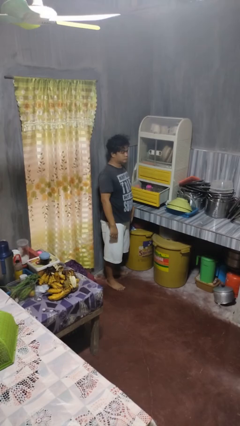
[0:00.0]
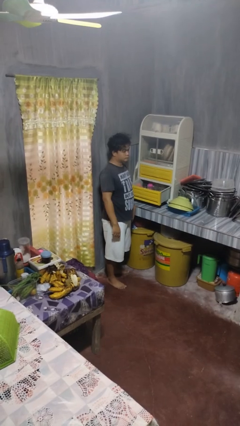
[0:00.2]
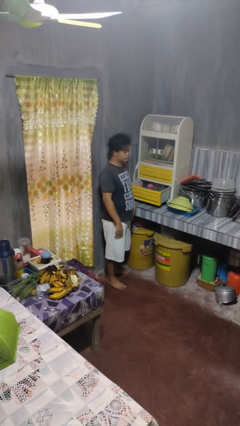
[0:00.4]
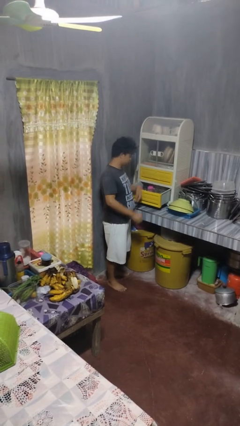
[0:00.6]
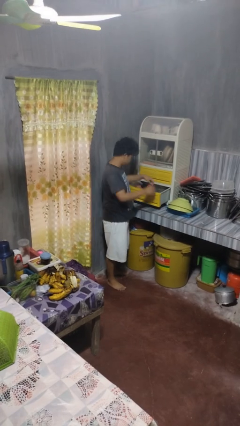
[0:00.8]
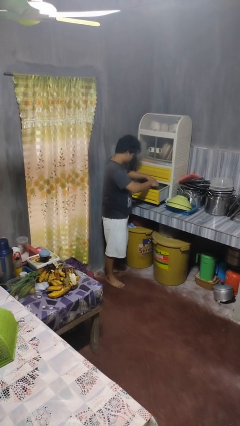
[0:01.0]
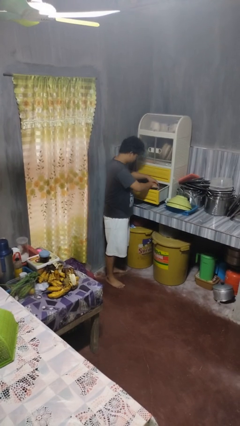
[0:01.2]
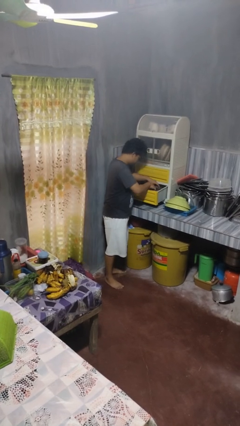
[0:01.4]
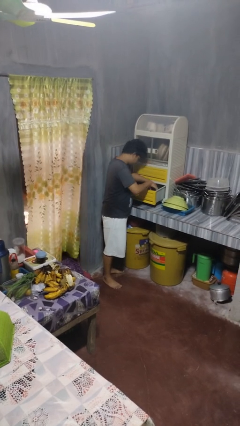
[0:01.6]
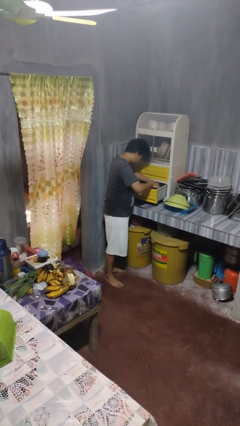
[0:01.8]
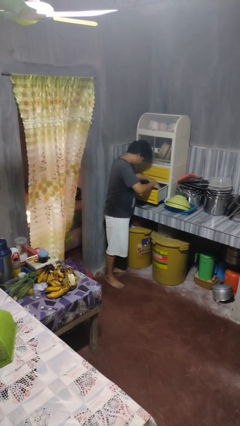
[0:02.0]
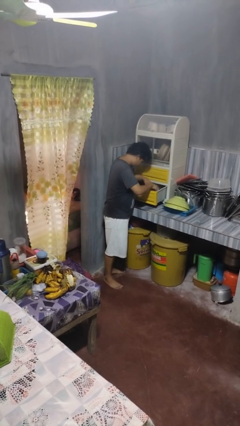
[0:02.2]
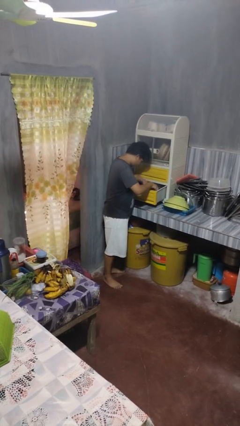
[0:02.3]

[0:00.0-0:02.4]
person searches in kitchen drawer

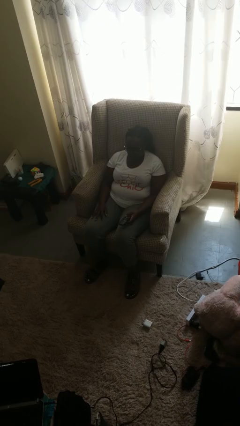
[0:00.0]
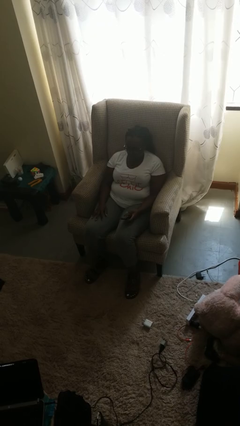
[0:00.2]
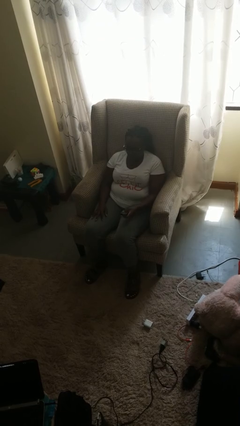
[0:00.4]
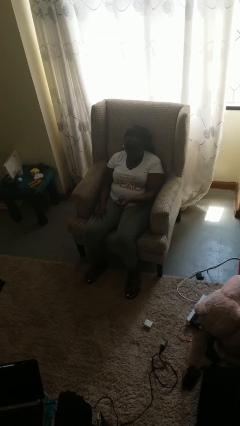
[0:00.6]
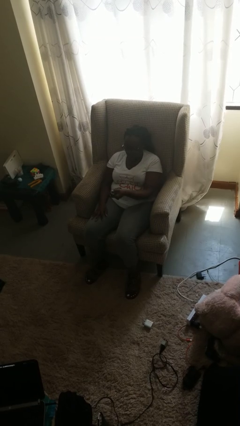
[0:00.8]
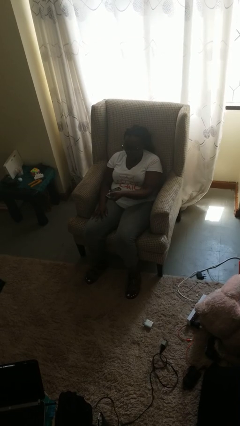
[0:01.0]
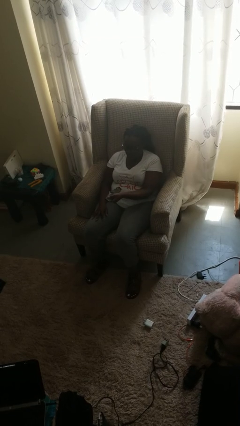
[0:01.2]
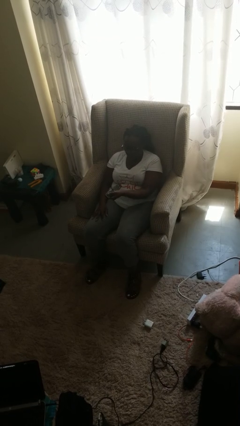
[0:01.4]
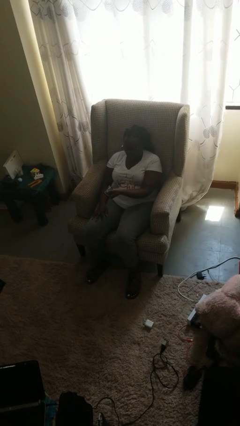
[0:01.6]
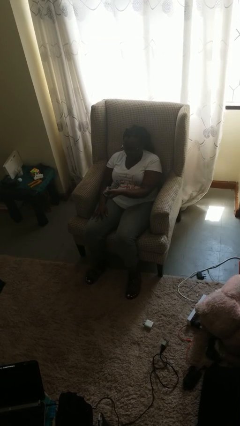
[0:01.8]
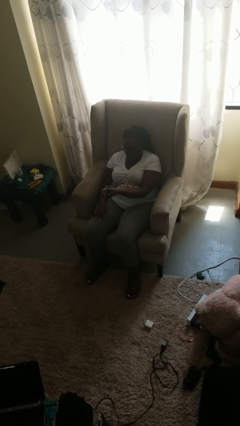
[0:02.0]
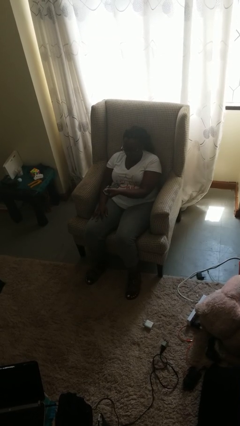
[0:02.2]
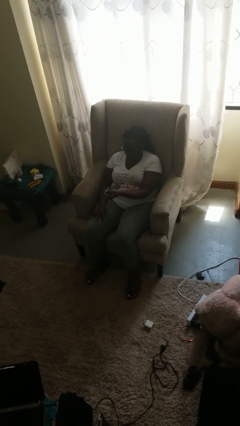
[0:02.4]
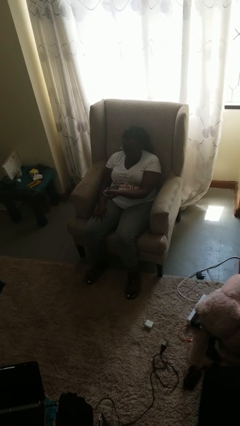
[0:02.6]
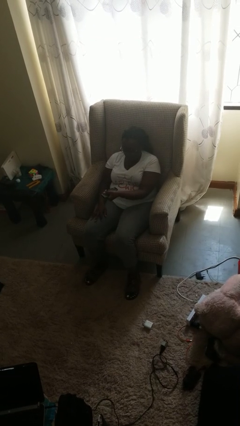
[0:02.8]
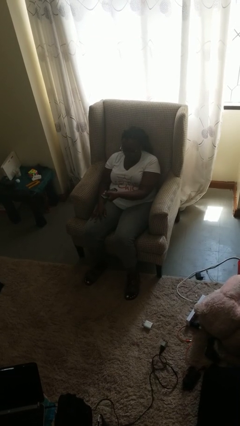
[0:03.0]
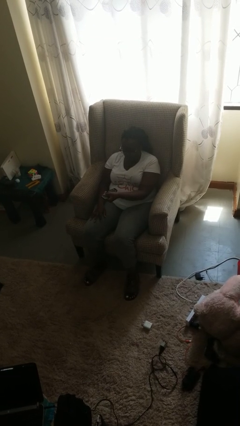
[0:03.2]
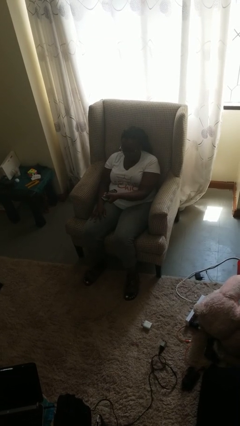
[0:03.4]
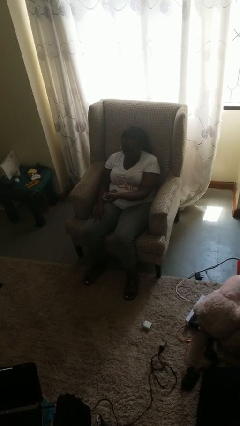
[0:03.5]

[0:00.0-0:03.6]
person uses television remote

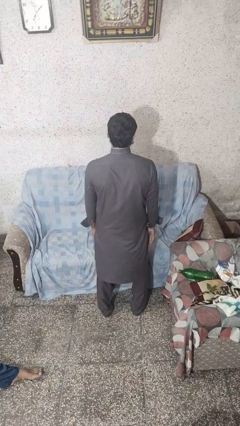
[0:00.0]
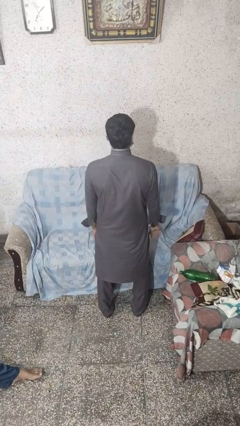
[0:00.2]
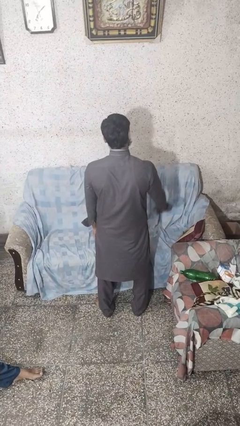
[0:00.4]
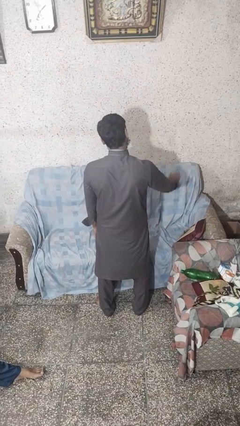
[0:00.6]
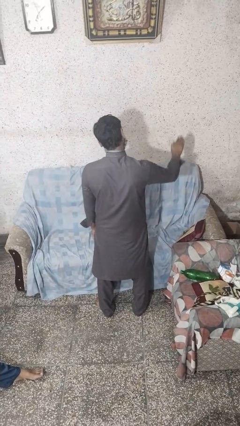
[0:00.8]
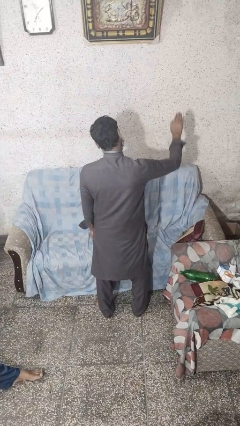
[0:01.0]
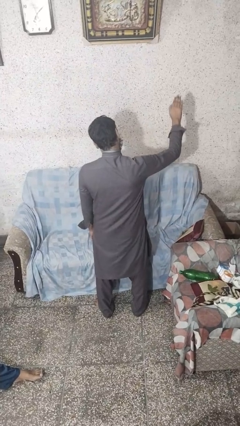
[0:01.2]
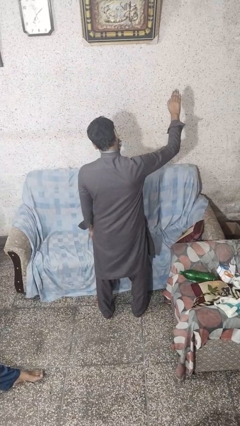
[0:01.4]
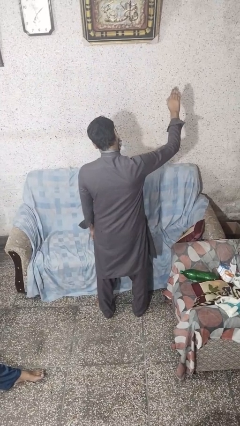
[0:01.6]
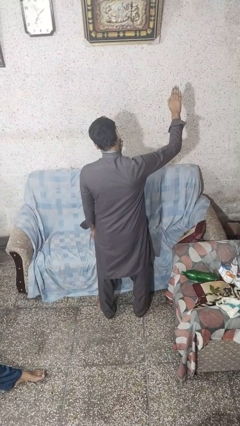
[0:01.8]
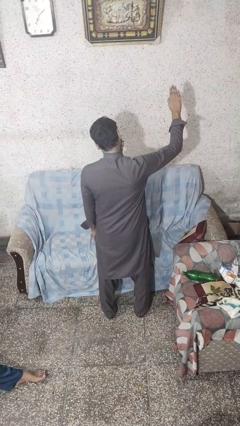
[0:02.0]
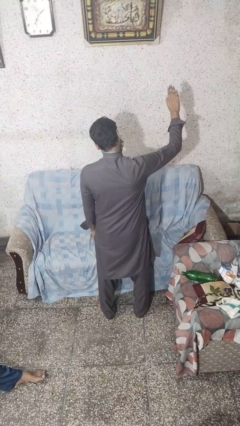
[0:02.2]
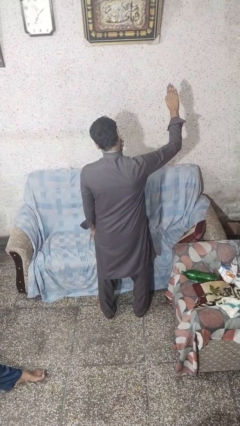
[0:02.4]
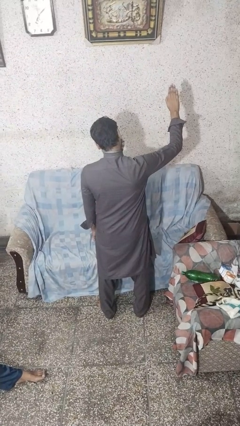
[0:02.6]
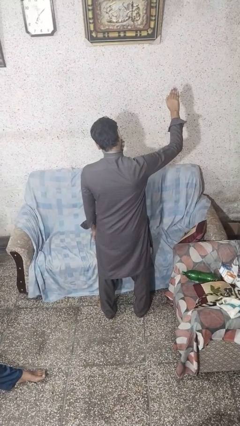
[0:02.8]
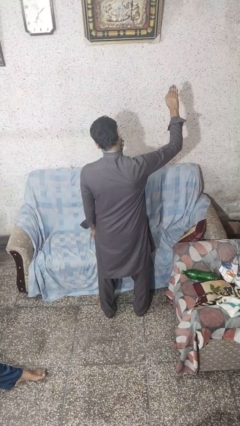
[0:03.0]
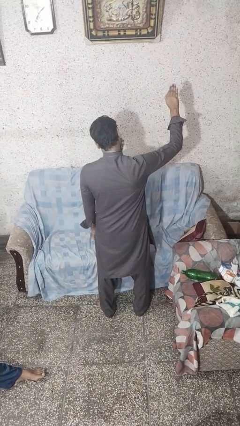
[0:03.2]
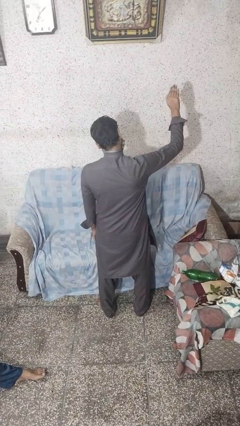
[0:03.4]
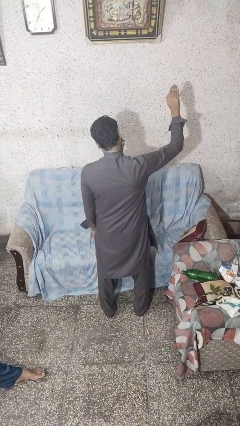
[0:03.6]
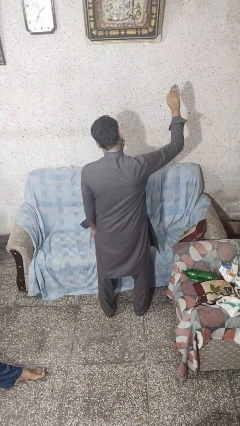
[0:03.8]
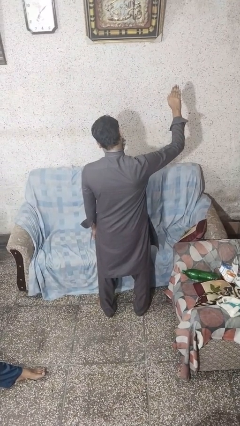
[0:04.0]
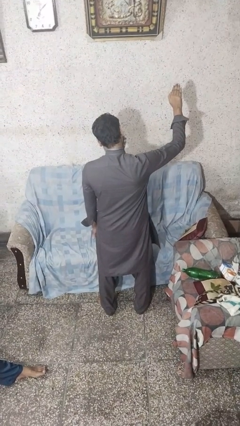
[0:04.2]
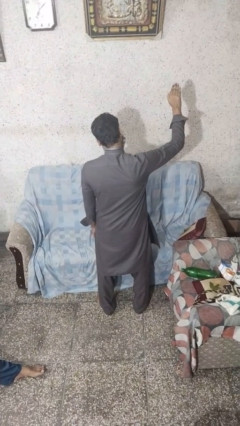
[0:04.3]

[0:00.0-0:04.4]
person gestures stop

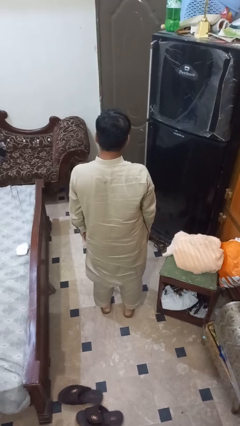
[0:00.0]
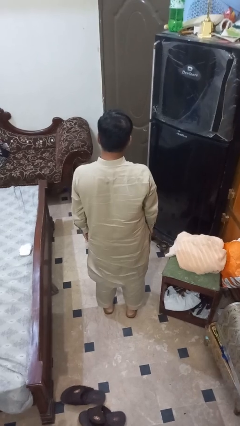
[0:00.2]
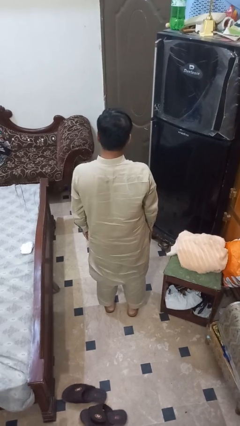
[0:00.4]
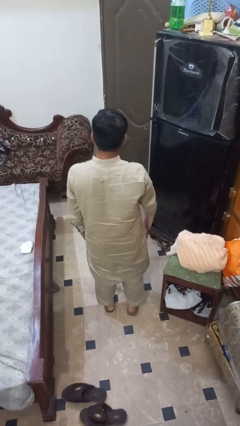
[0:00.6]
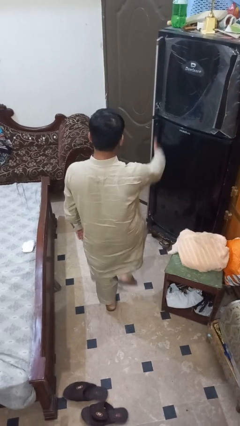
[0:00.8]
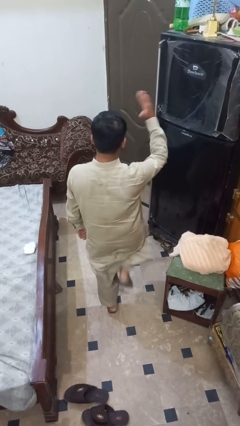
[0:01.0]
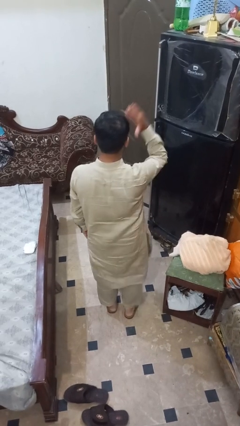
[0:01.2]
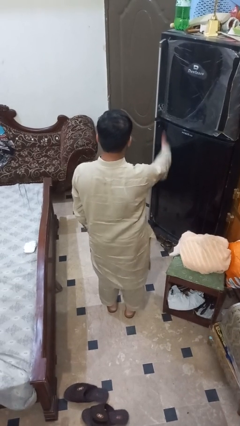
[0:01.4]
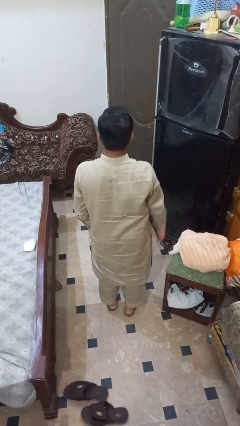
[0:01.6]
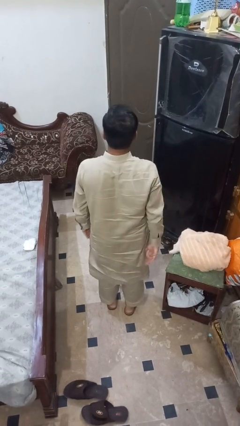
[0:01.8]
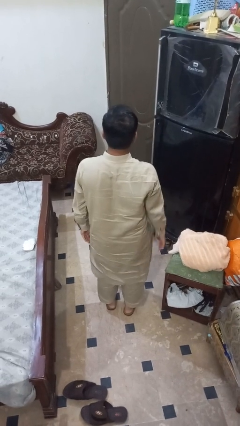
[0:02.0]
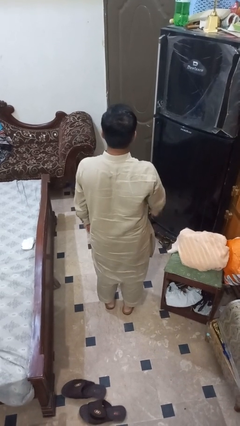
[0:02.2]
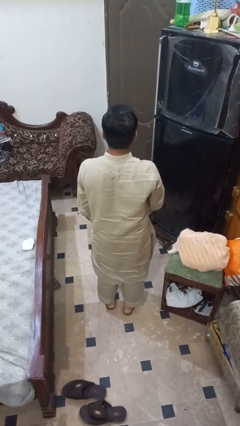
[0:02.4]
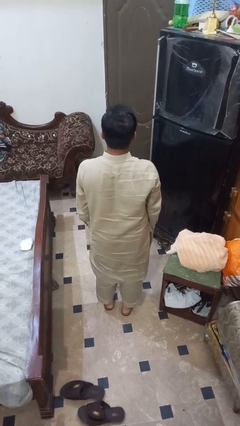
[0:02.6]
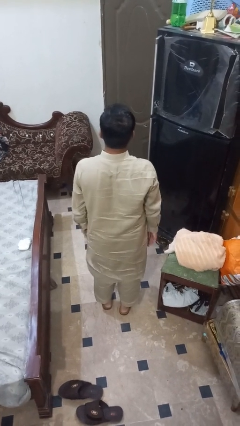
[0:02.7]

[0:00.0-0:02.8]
person salutes

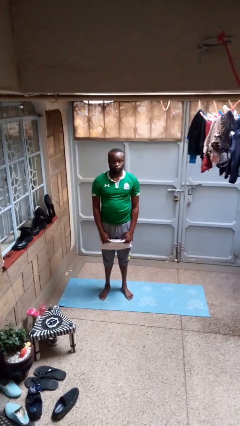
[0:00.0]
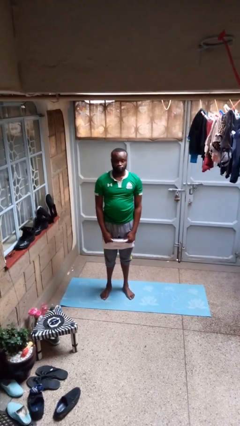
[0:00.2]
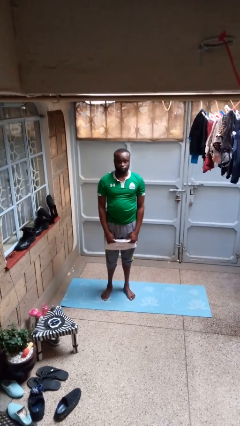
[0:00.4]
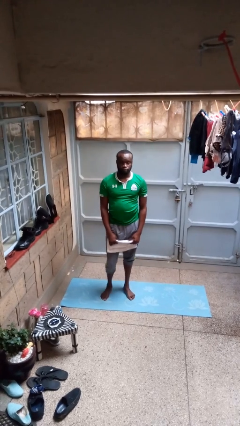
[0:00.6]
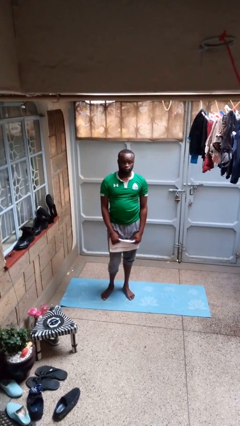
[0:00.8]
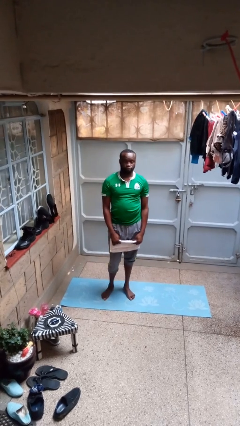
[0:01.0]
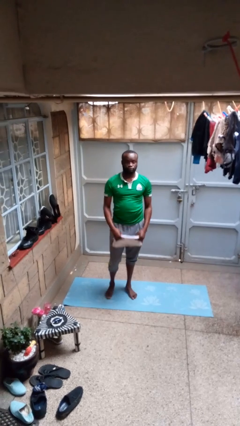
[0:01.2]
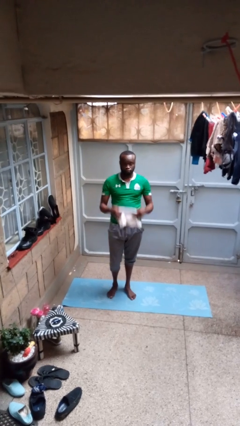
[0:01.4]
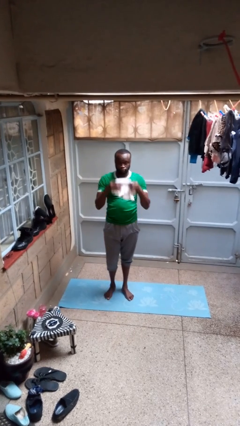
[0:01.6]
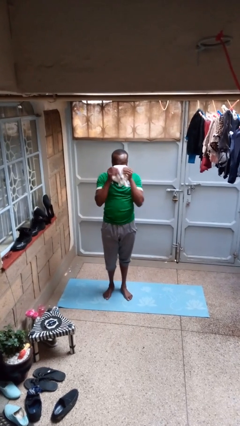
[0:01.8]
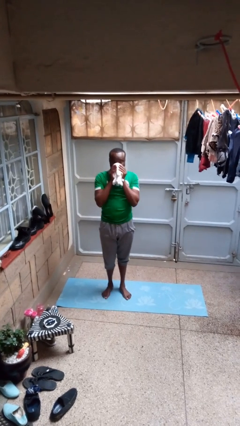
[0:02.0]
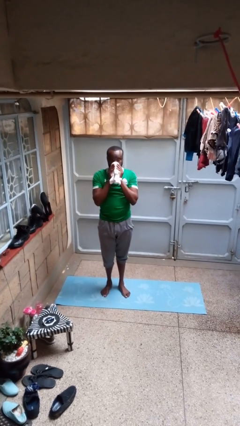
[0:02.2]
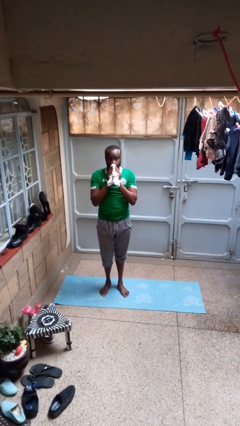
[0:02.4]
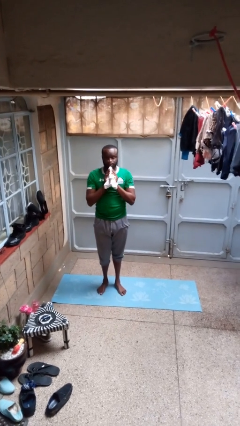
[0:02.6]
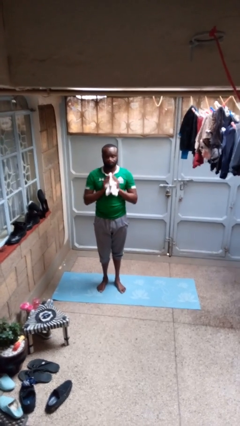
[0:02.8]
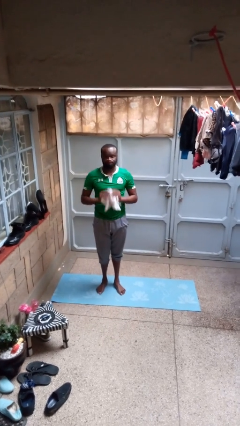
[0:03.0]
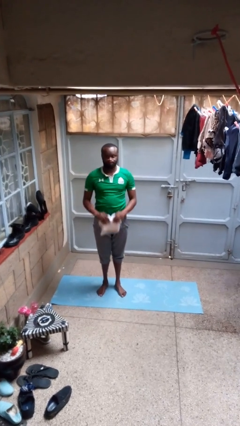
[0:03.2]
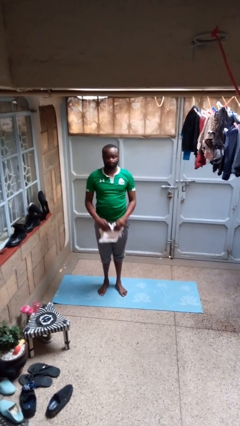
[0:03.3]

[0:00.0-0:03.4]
person wipes mouth with napkin

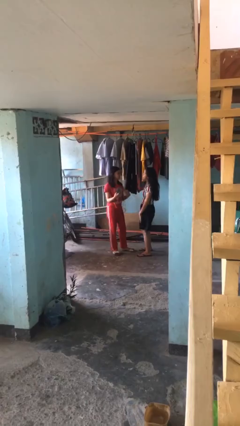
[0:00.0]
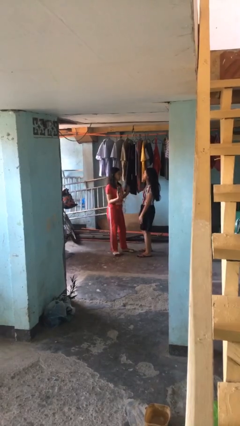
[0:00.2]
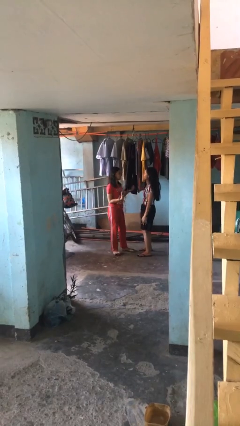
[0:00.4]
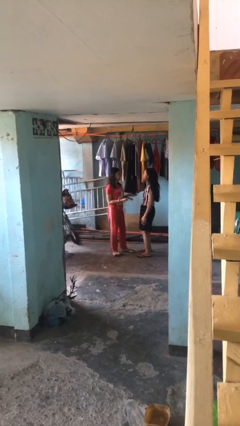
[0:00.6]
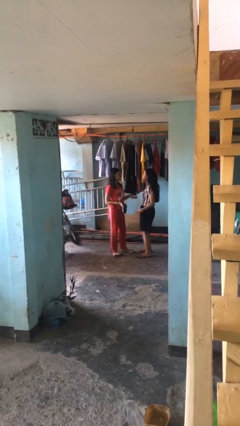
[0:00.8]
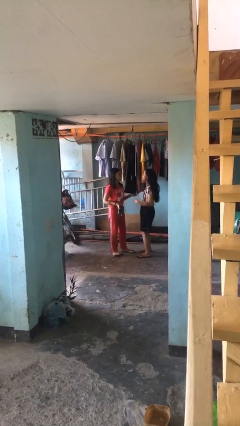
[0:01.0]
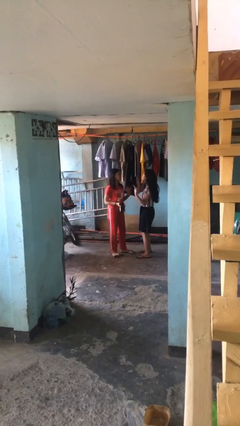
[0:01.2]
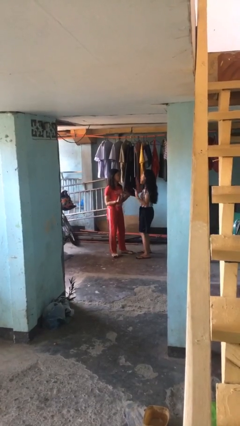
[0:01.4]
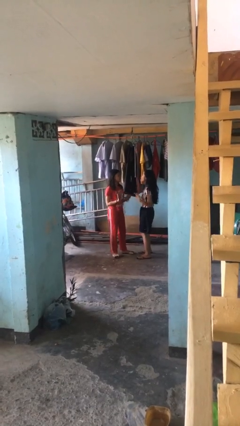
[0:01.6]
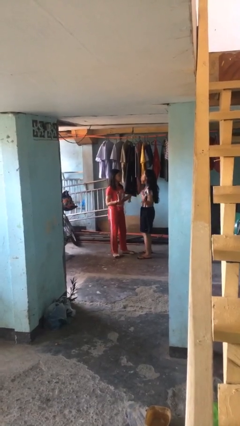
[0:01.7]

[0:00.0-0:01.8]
person talks to person
